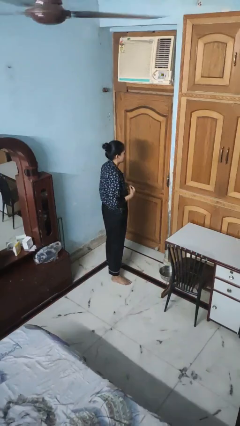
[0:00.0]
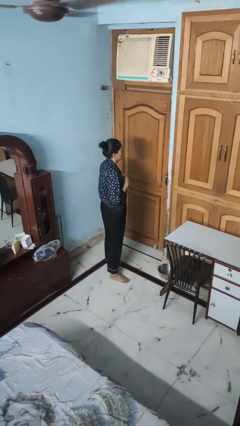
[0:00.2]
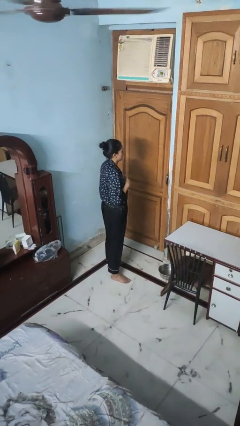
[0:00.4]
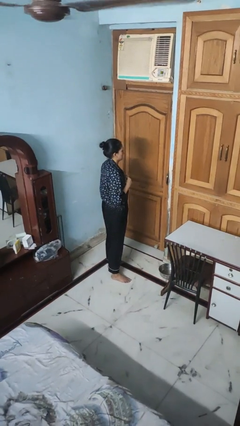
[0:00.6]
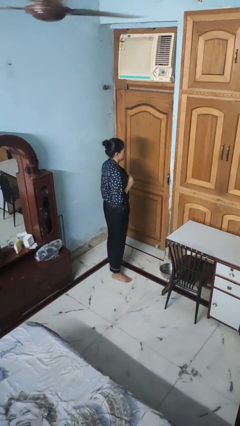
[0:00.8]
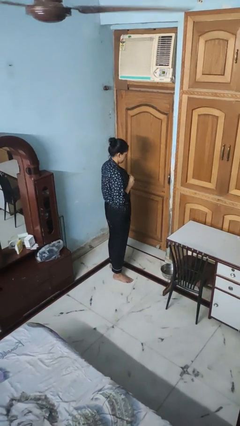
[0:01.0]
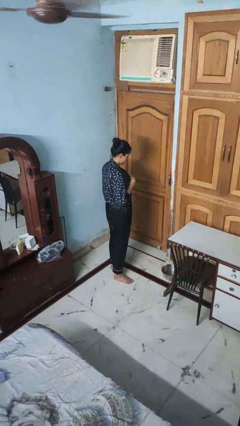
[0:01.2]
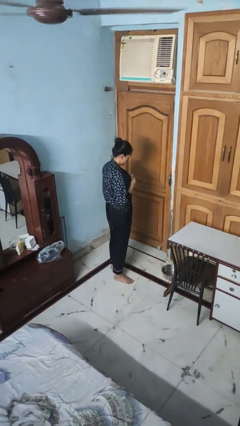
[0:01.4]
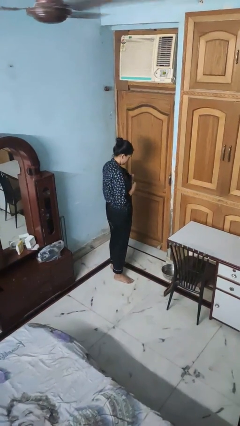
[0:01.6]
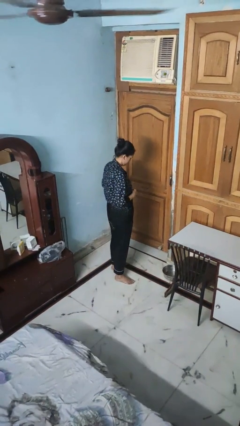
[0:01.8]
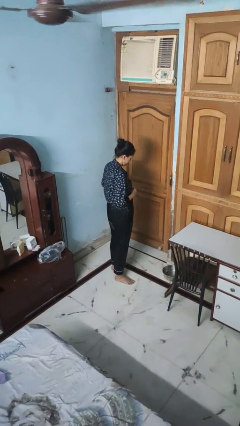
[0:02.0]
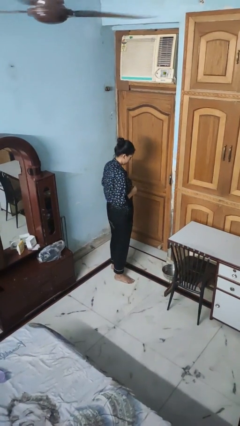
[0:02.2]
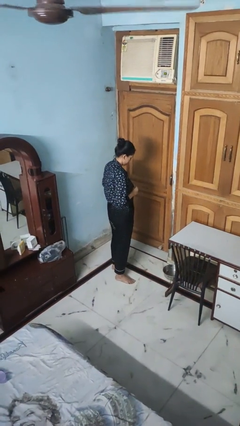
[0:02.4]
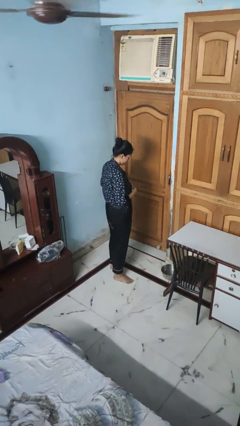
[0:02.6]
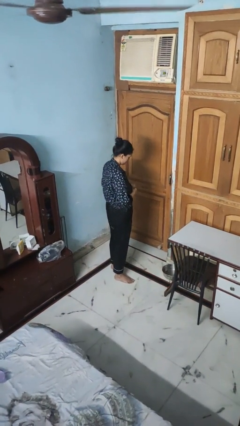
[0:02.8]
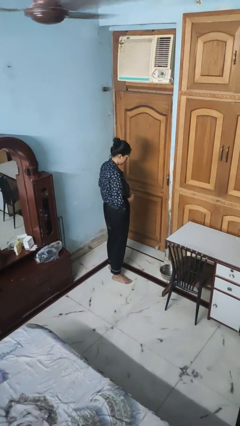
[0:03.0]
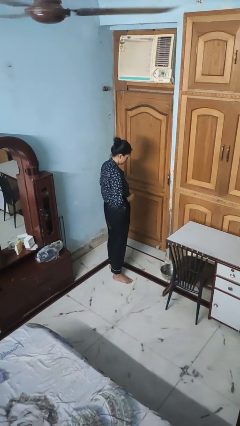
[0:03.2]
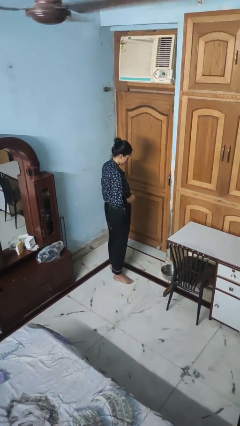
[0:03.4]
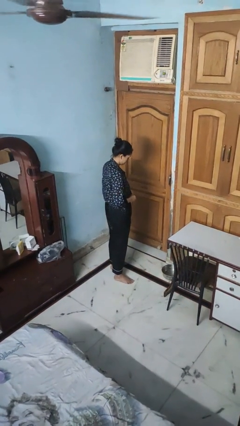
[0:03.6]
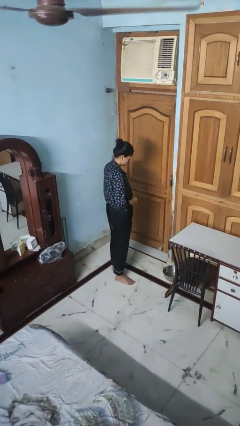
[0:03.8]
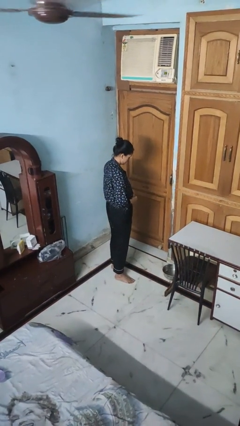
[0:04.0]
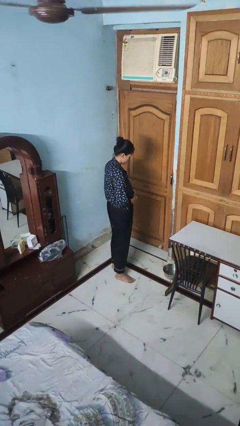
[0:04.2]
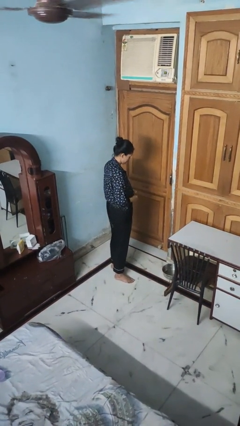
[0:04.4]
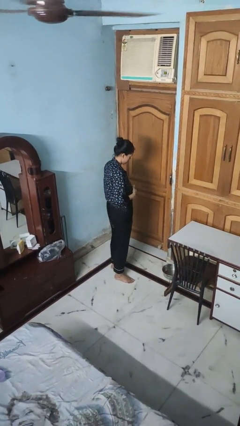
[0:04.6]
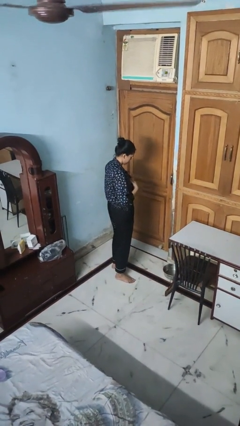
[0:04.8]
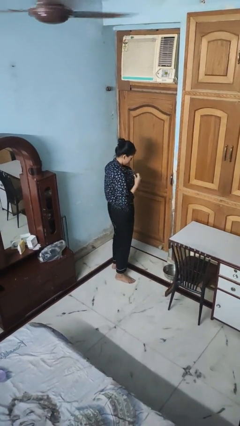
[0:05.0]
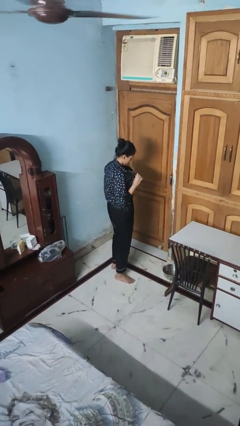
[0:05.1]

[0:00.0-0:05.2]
person unbuttons shirt

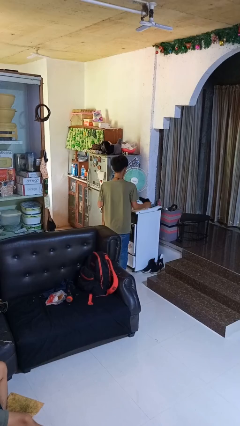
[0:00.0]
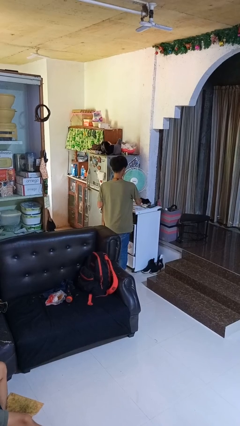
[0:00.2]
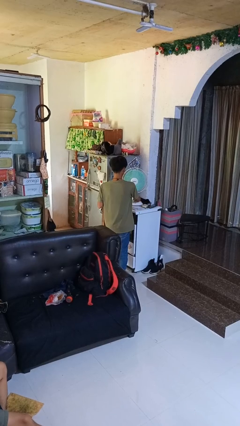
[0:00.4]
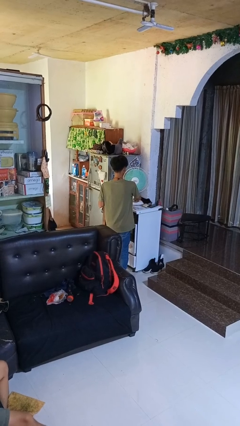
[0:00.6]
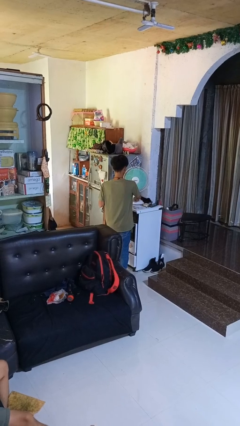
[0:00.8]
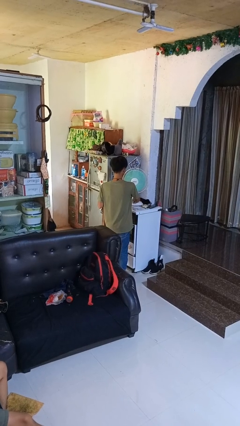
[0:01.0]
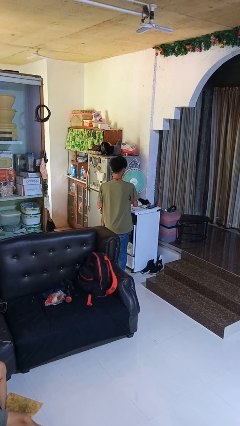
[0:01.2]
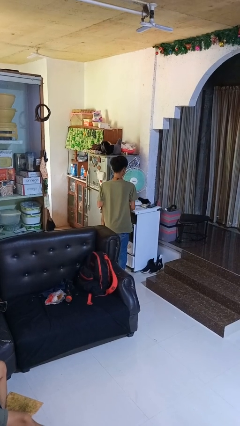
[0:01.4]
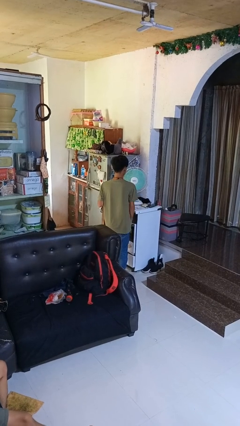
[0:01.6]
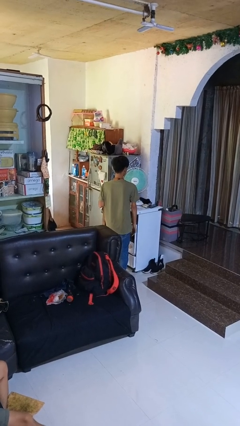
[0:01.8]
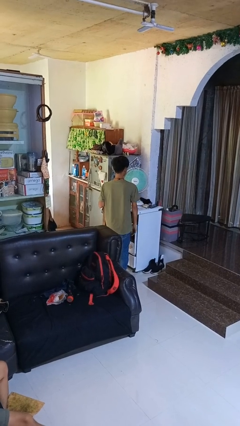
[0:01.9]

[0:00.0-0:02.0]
person turns off fan

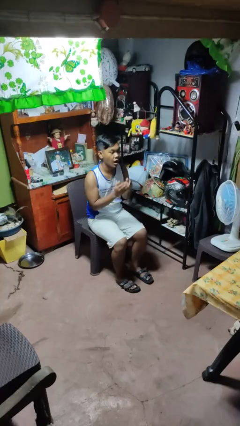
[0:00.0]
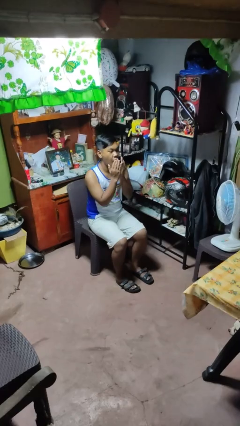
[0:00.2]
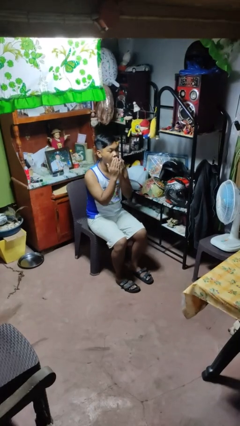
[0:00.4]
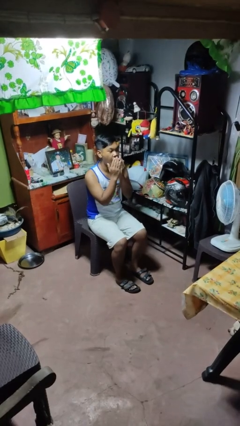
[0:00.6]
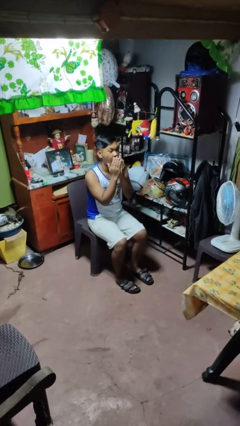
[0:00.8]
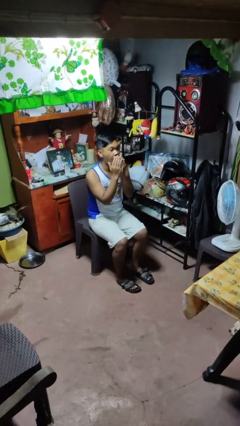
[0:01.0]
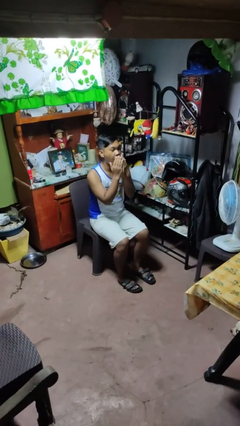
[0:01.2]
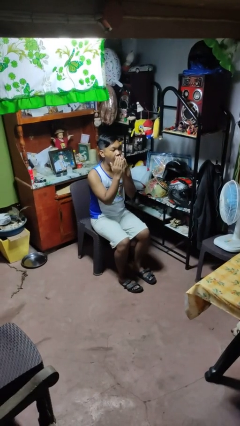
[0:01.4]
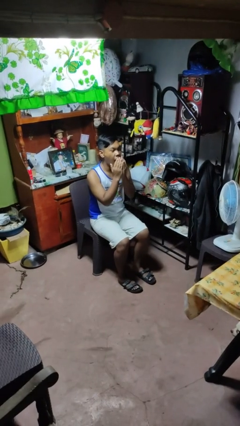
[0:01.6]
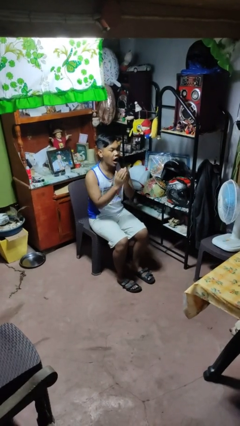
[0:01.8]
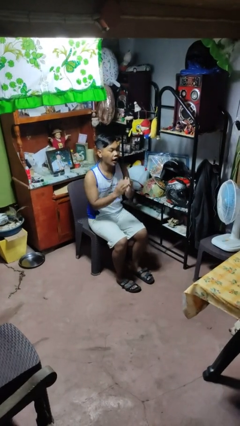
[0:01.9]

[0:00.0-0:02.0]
person yawns

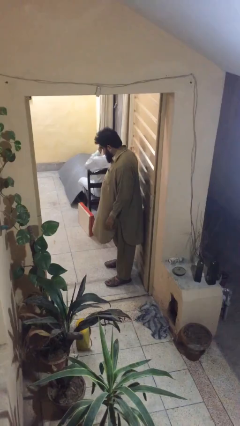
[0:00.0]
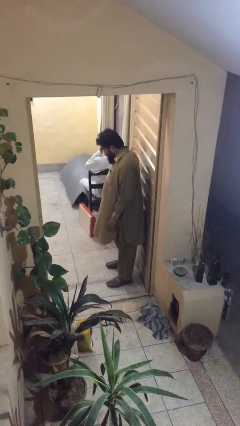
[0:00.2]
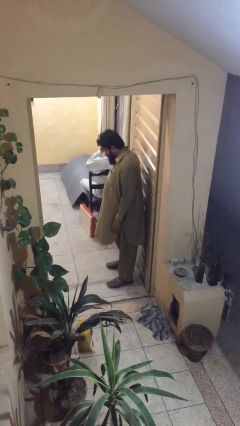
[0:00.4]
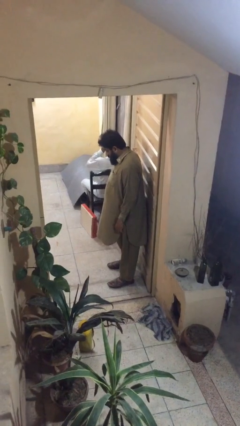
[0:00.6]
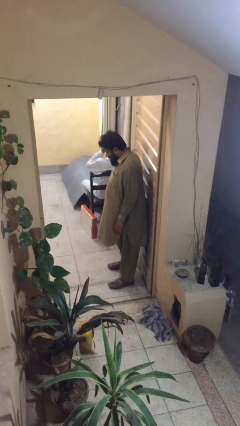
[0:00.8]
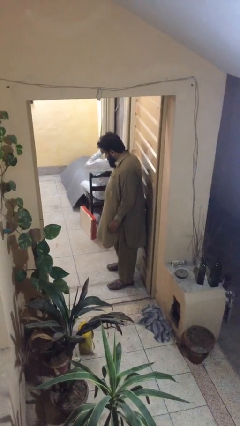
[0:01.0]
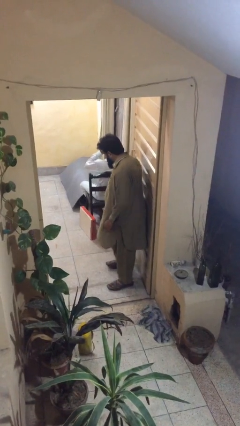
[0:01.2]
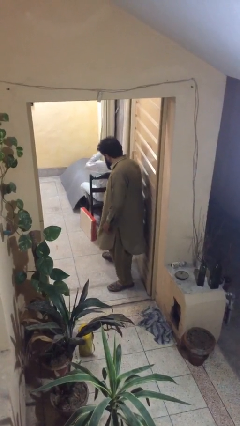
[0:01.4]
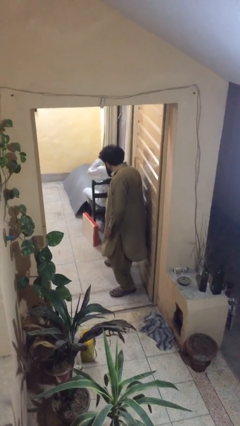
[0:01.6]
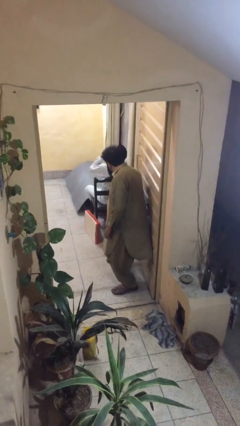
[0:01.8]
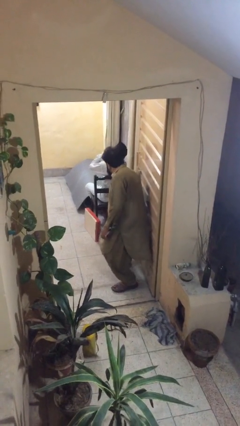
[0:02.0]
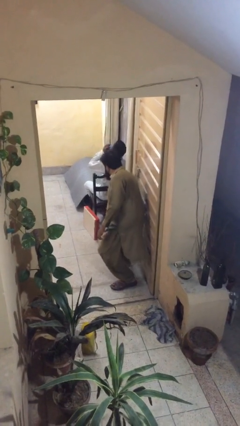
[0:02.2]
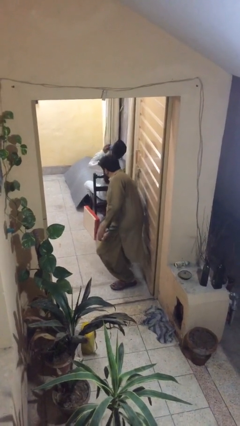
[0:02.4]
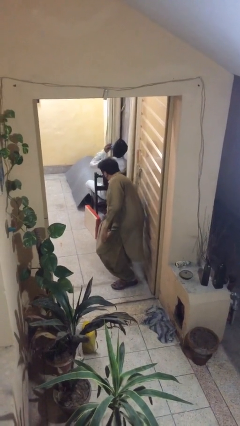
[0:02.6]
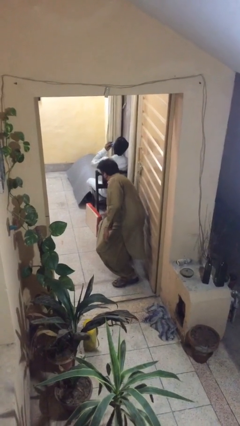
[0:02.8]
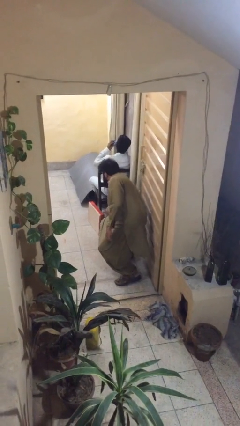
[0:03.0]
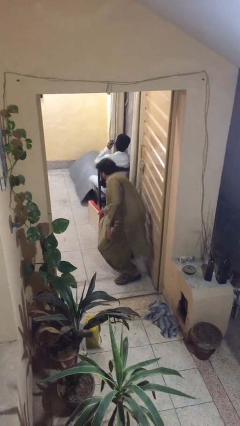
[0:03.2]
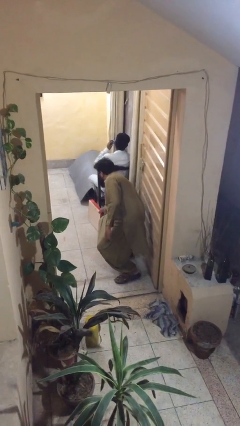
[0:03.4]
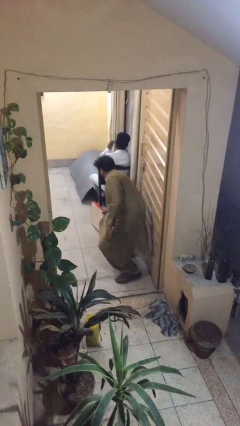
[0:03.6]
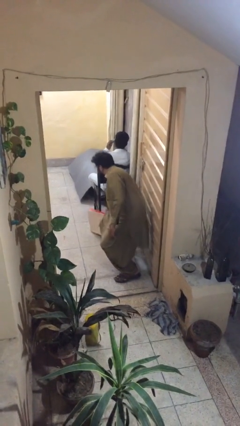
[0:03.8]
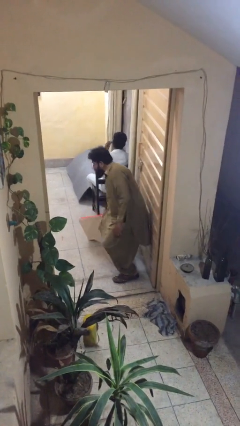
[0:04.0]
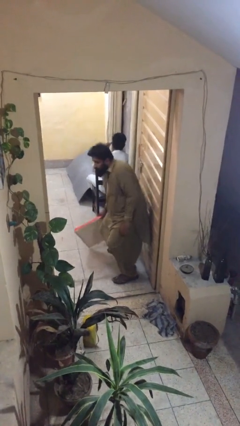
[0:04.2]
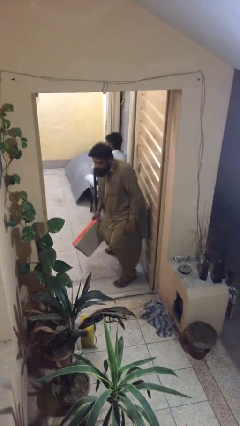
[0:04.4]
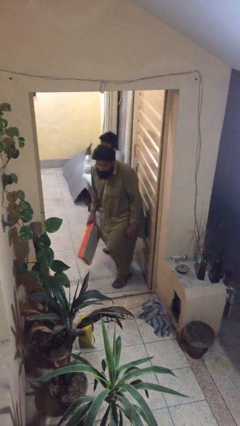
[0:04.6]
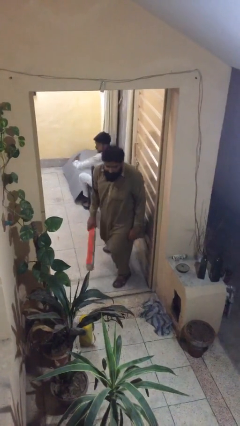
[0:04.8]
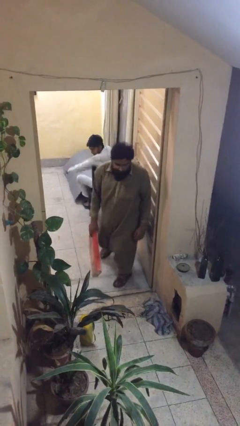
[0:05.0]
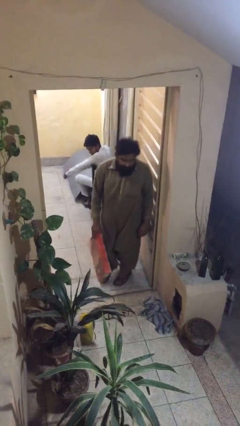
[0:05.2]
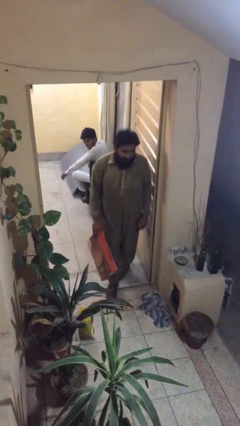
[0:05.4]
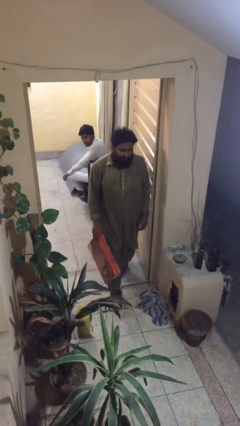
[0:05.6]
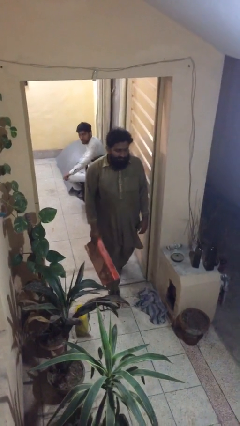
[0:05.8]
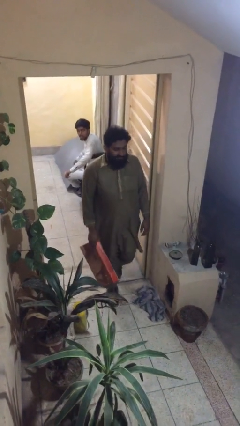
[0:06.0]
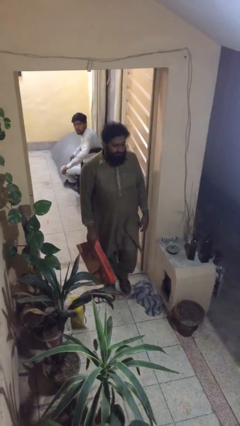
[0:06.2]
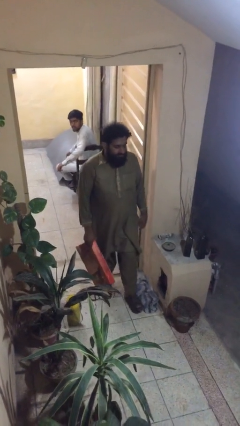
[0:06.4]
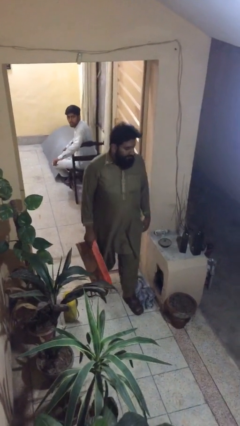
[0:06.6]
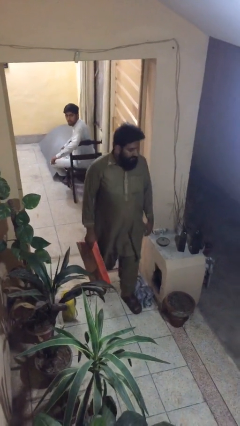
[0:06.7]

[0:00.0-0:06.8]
person steals object from person

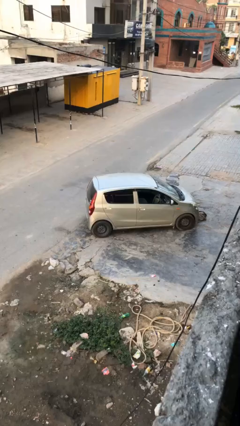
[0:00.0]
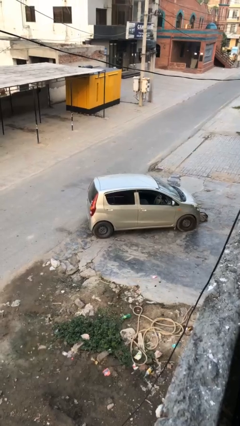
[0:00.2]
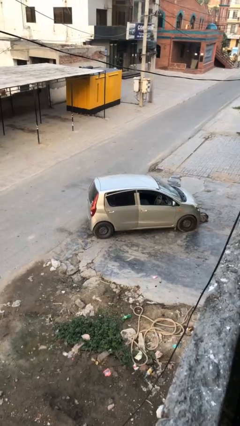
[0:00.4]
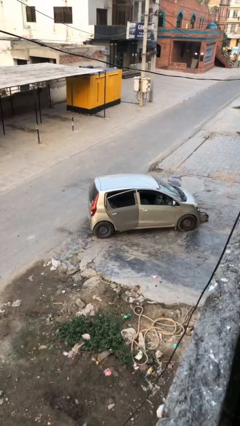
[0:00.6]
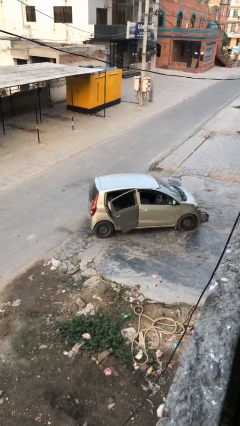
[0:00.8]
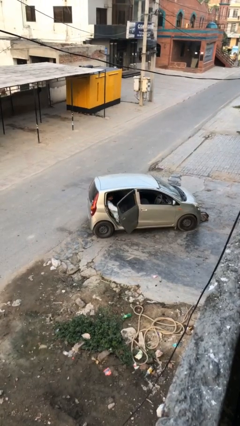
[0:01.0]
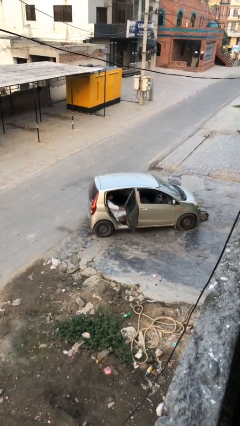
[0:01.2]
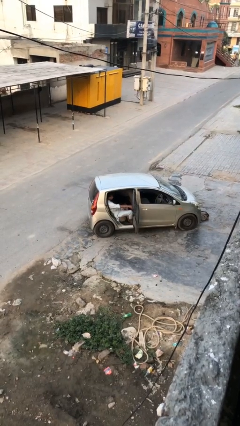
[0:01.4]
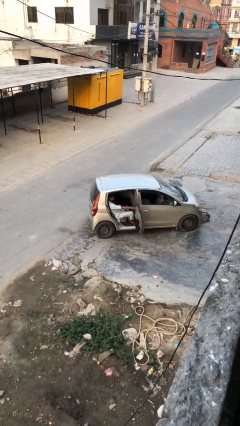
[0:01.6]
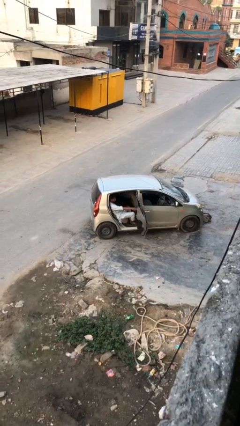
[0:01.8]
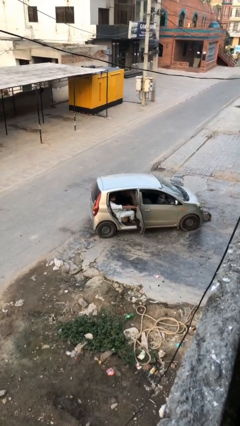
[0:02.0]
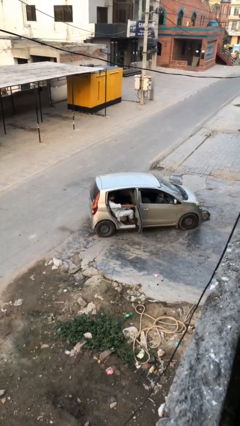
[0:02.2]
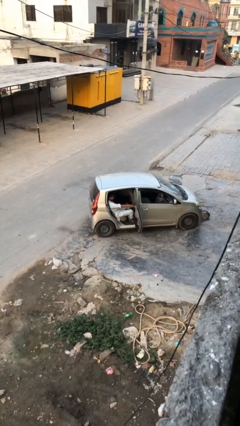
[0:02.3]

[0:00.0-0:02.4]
person opens car door
